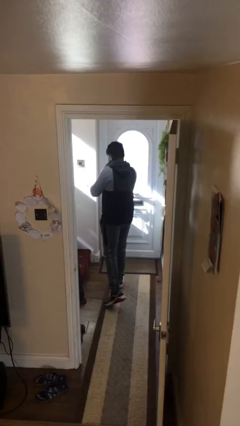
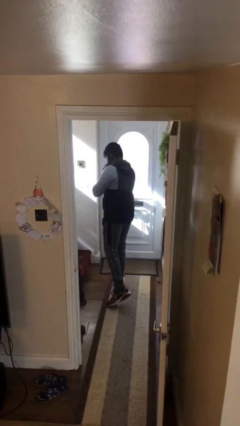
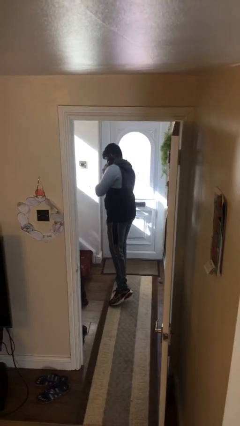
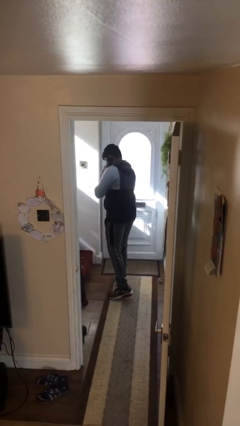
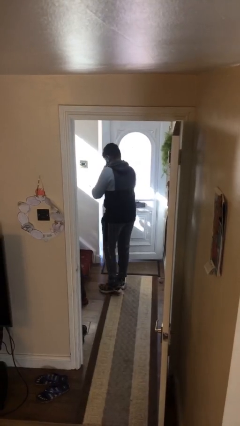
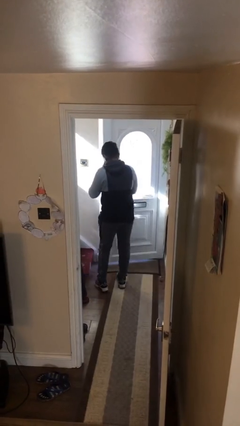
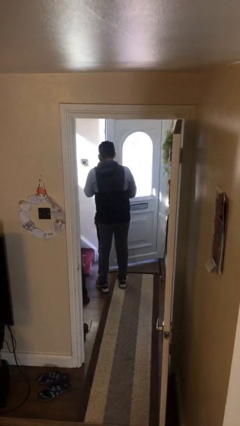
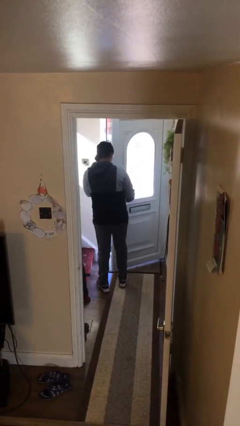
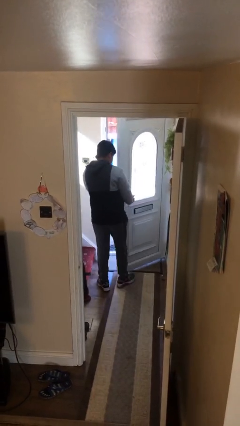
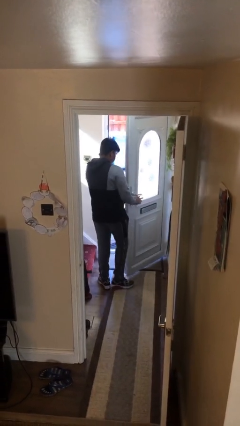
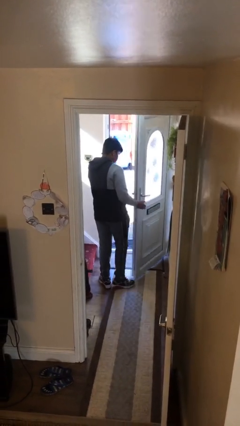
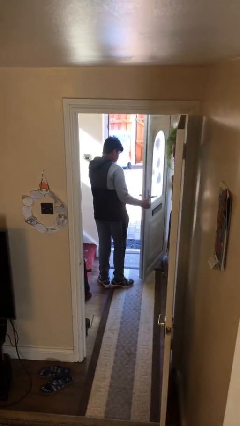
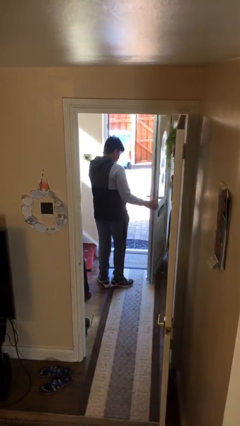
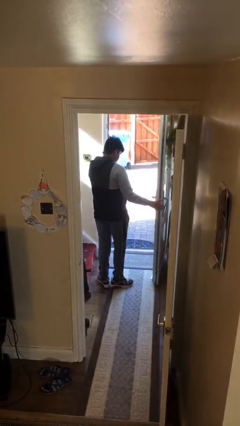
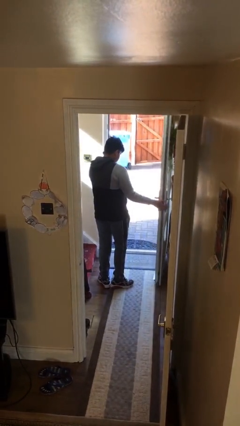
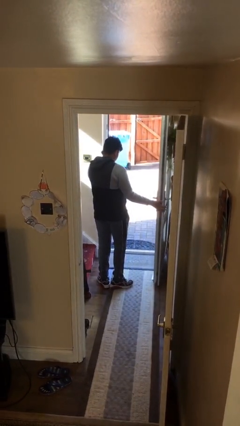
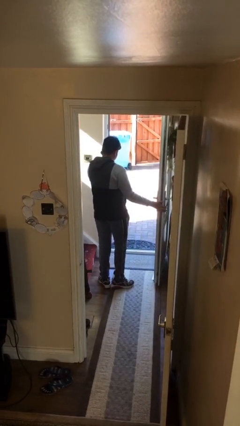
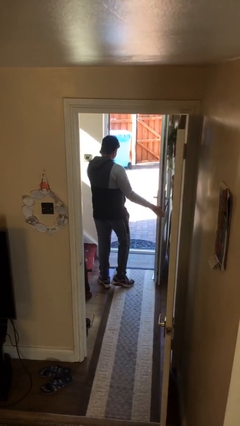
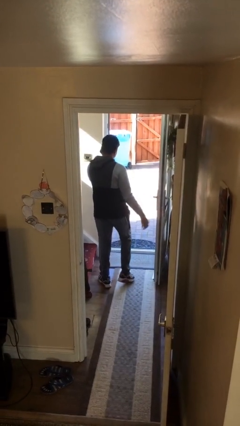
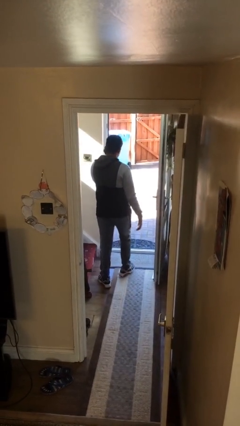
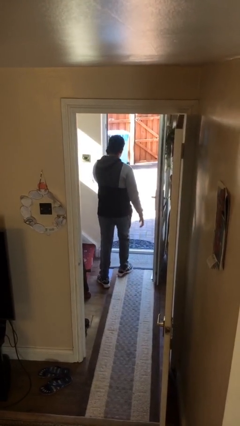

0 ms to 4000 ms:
person opens facility door

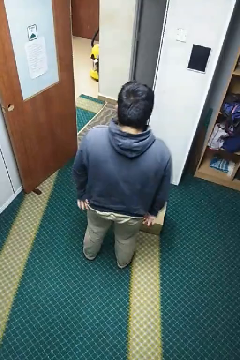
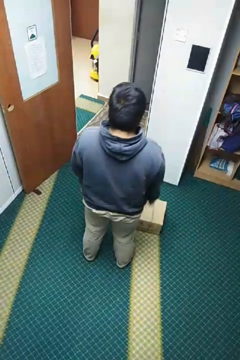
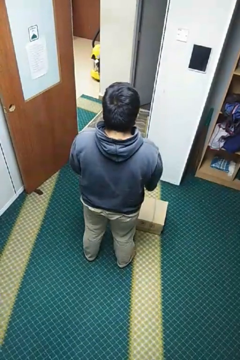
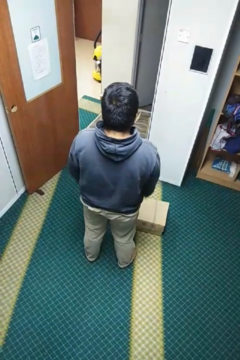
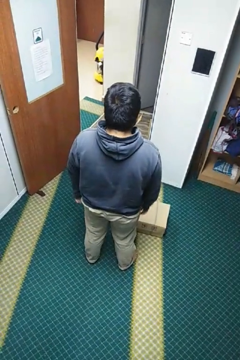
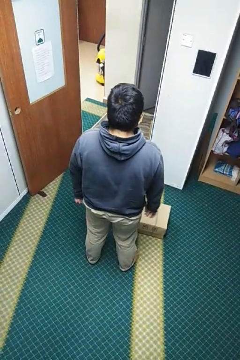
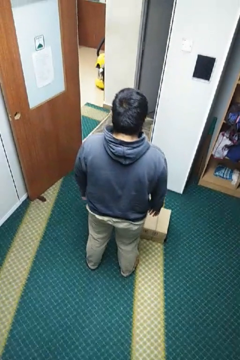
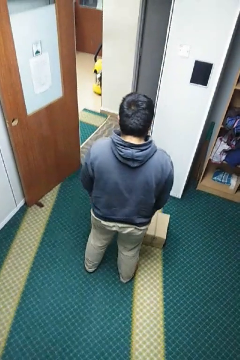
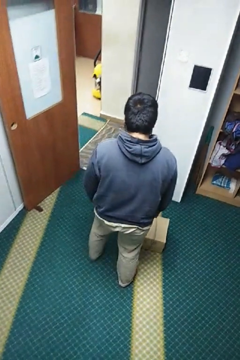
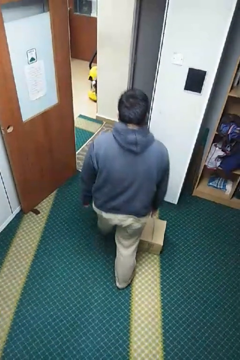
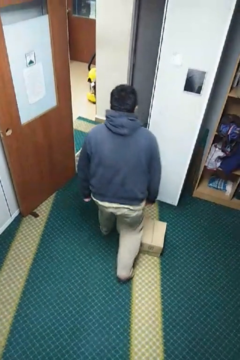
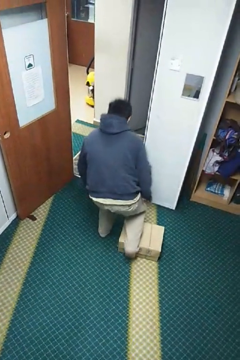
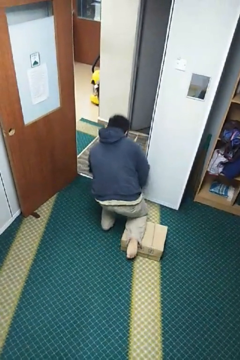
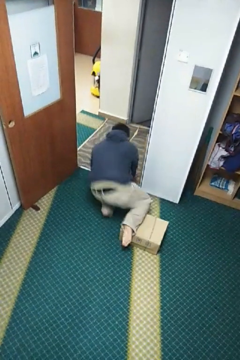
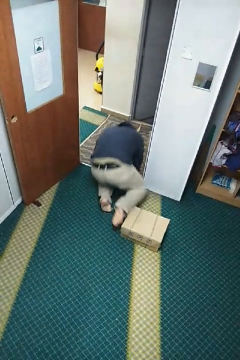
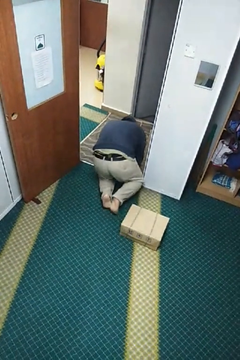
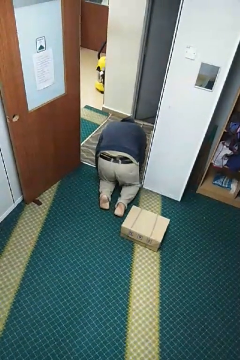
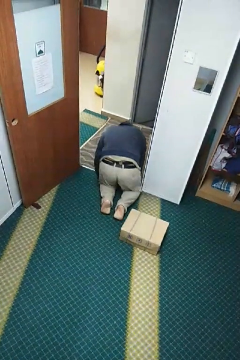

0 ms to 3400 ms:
person trips on object on floor

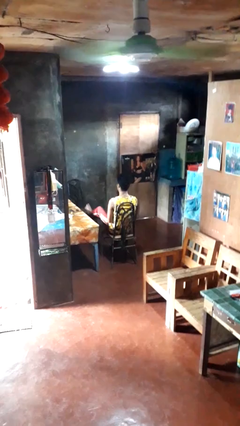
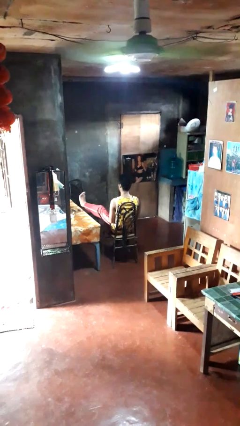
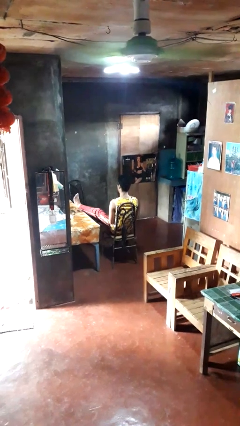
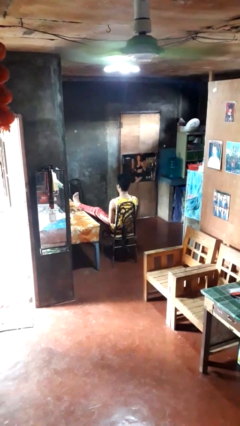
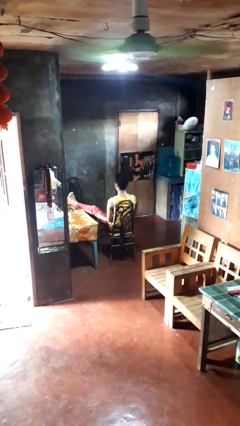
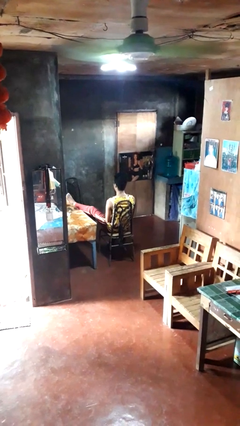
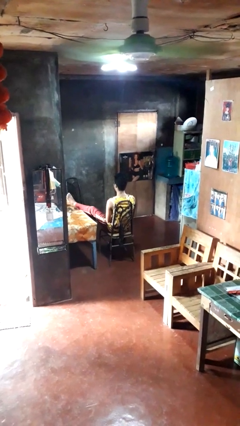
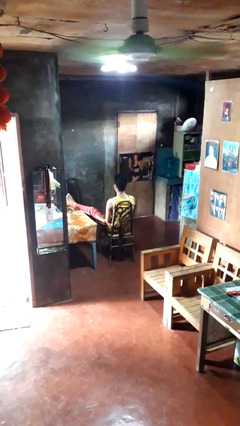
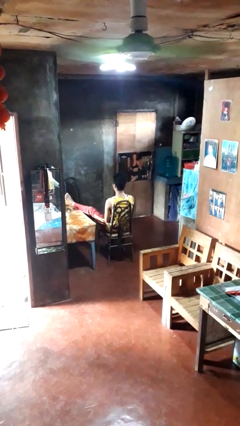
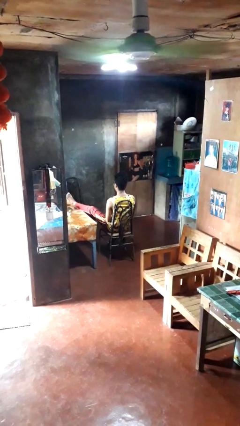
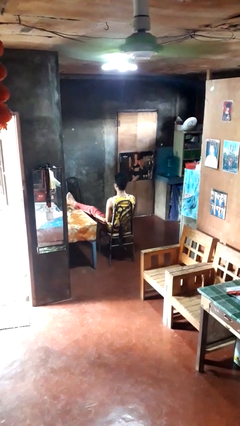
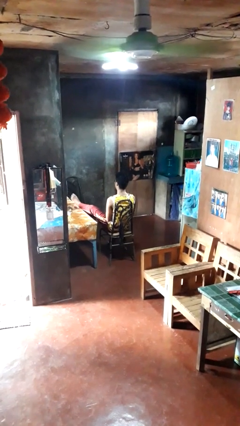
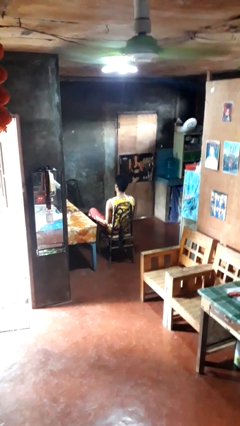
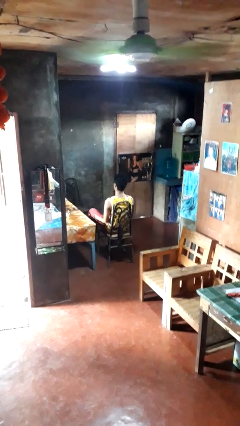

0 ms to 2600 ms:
person puts feet up

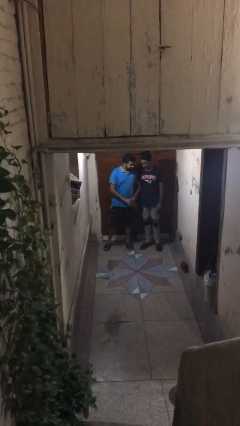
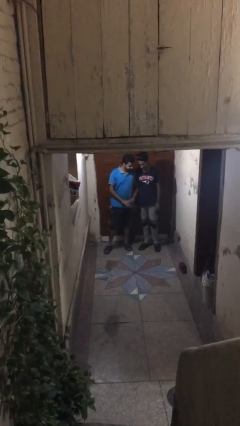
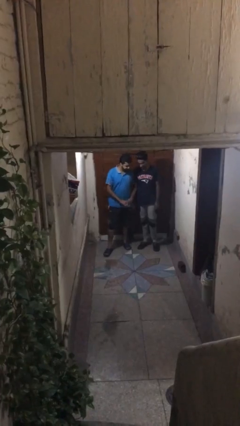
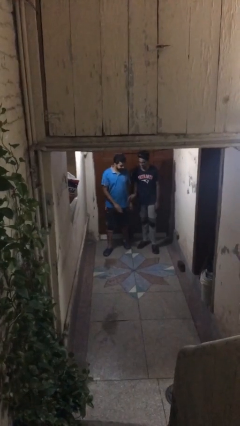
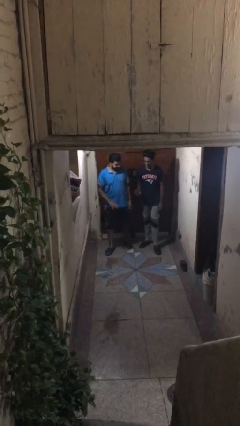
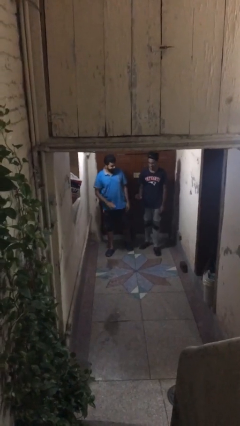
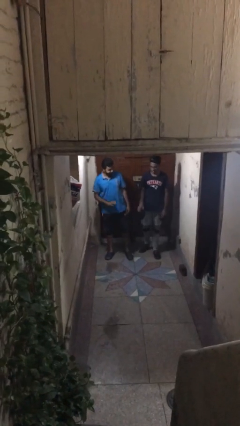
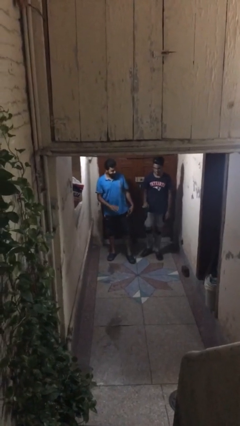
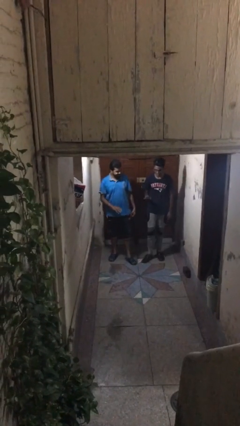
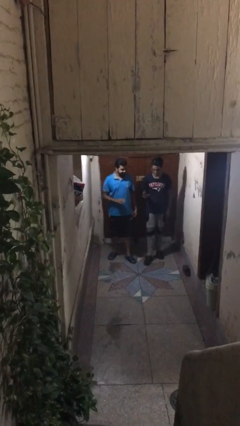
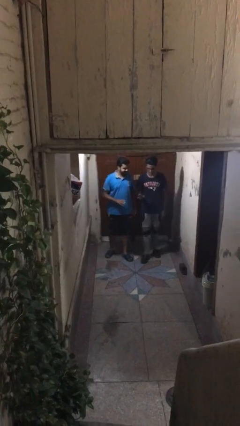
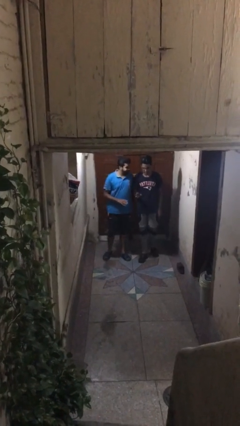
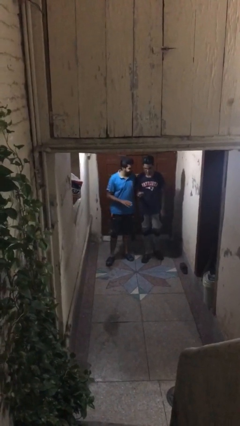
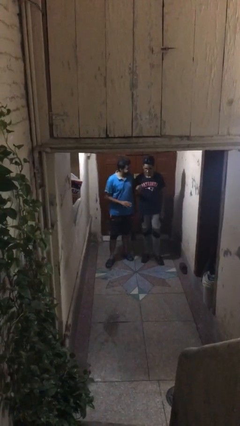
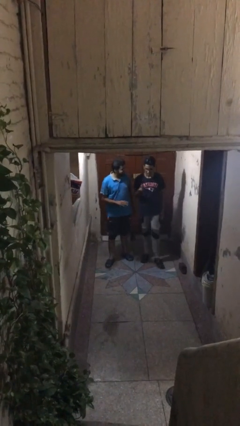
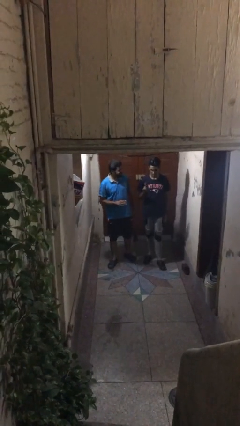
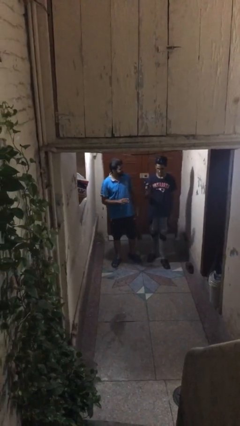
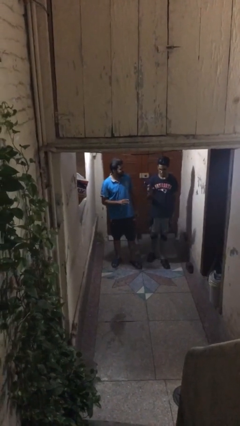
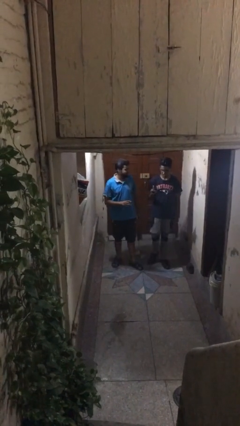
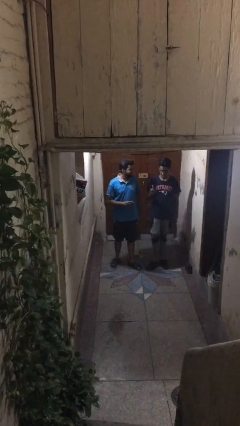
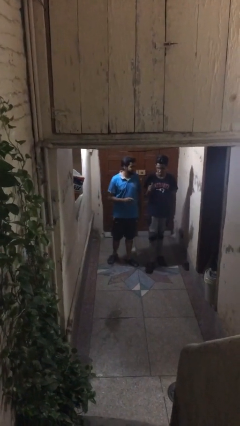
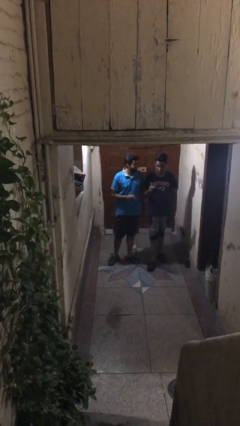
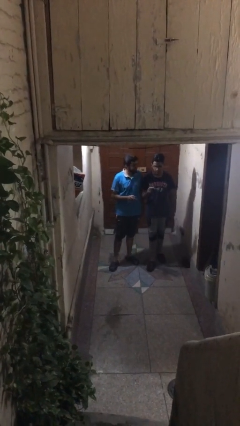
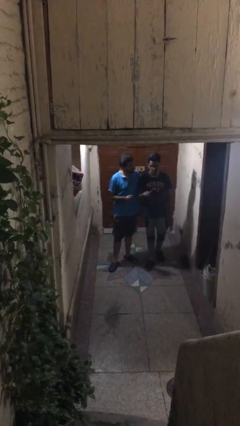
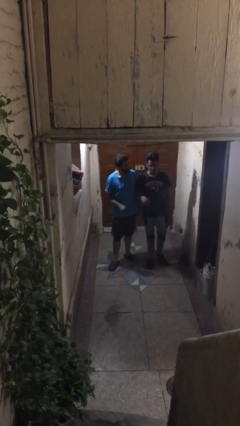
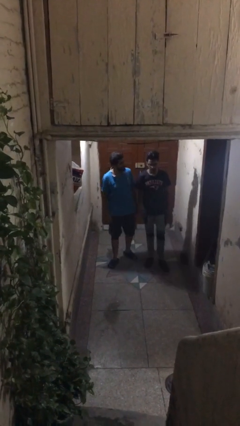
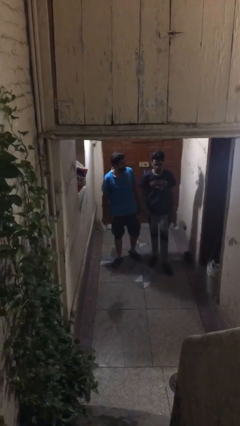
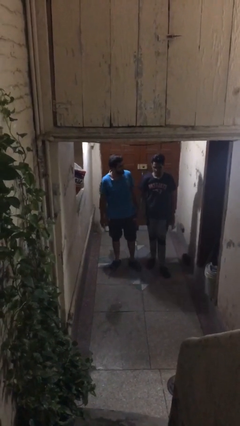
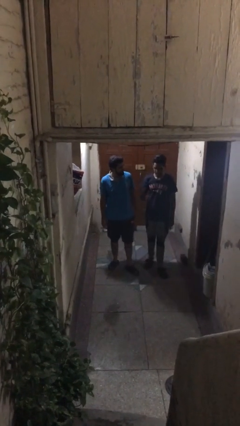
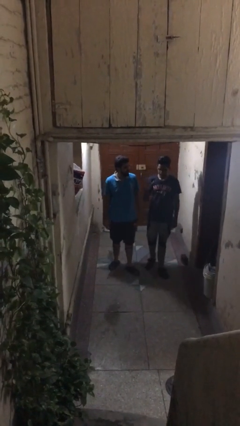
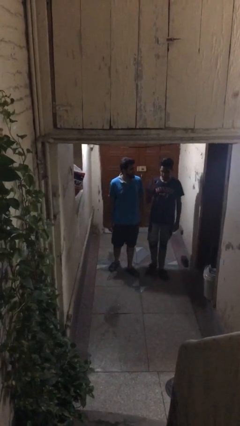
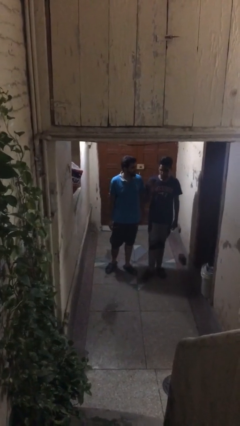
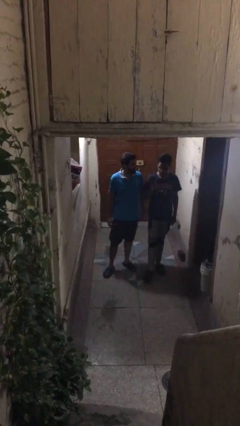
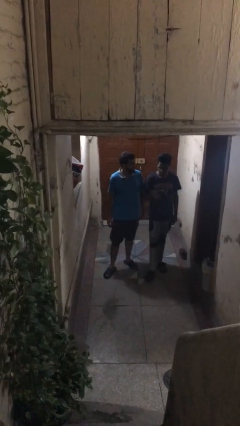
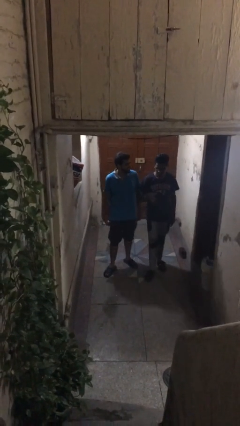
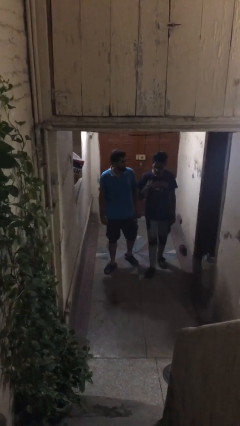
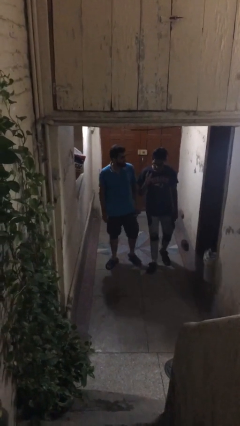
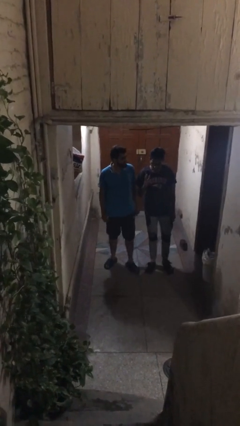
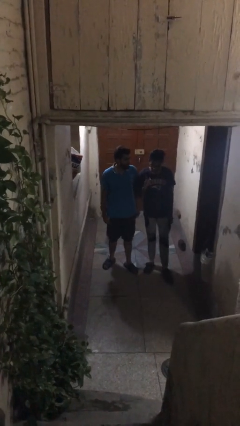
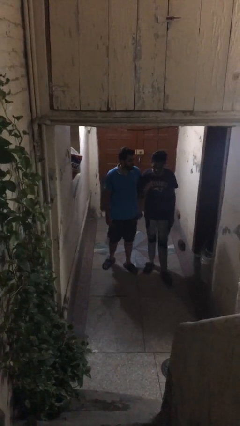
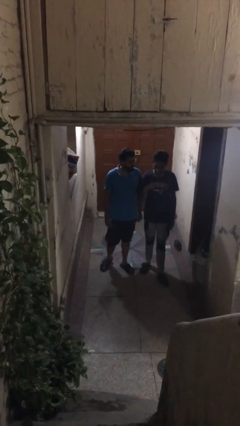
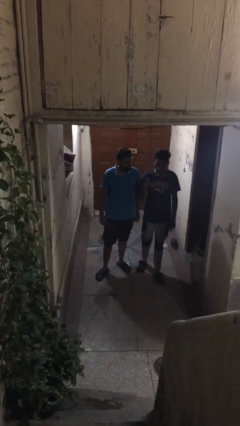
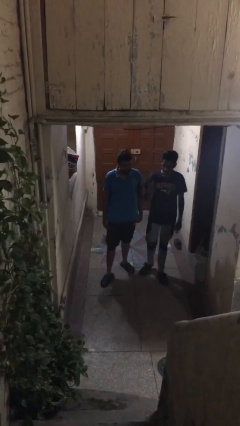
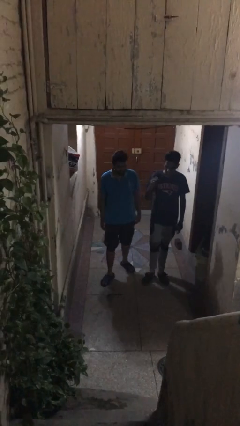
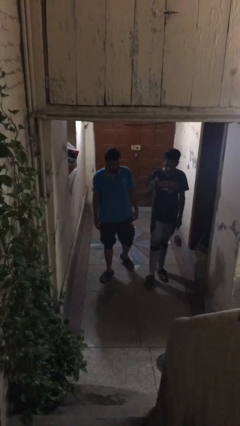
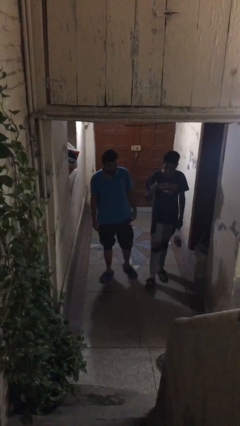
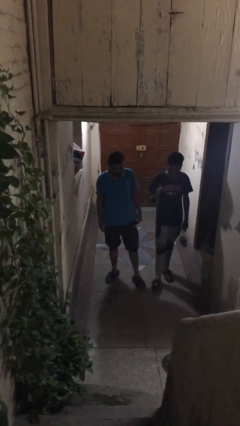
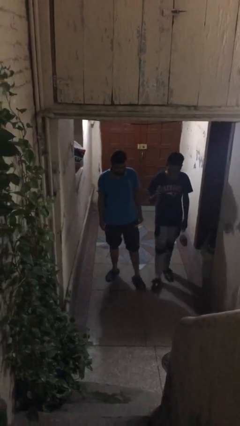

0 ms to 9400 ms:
person talks to person
